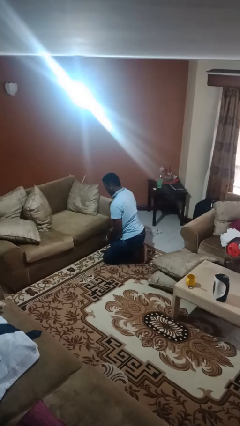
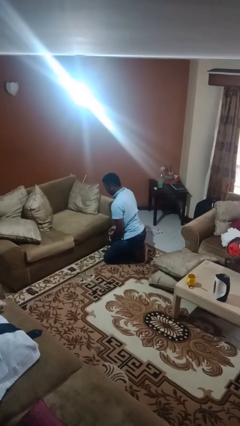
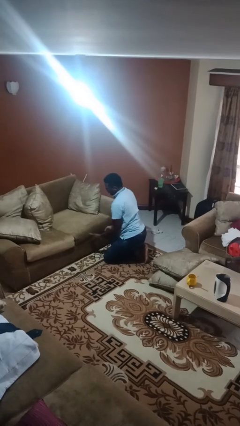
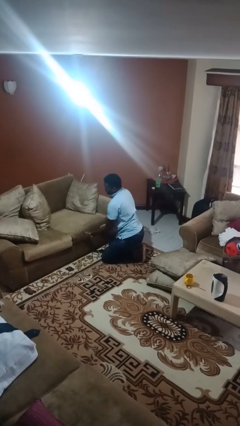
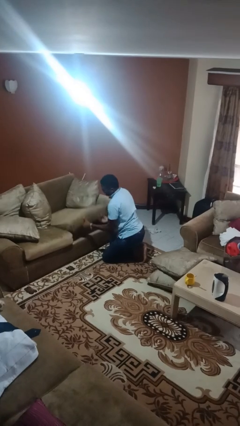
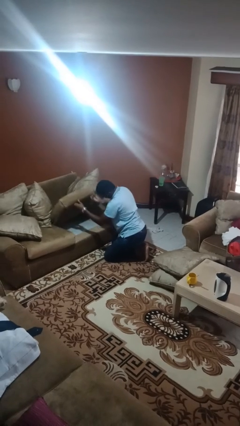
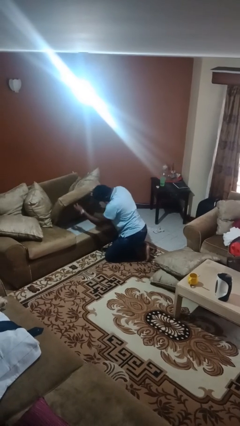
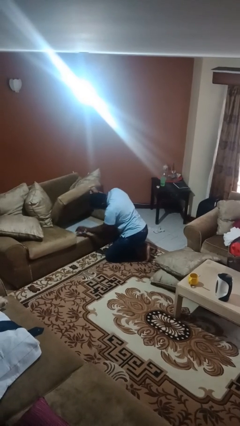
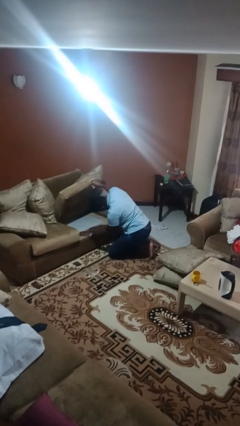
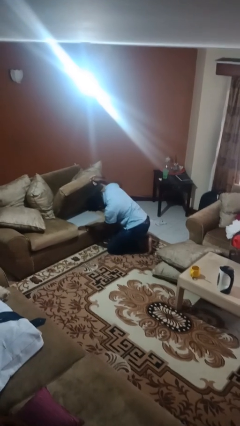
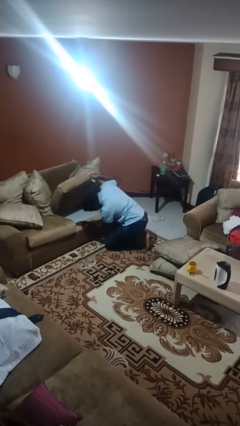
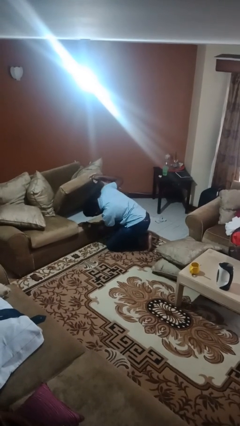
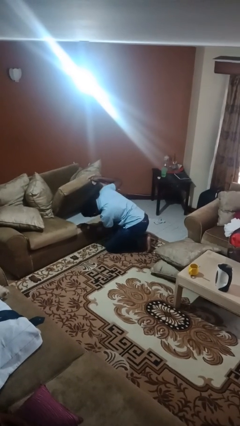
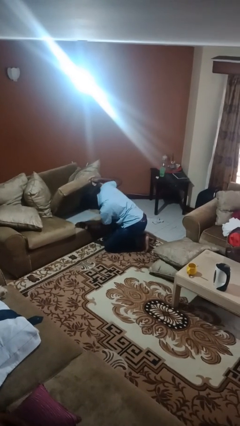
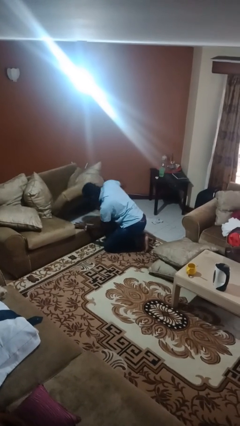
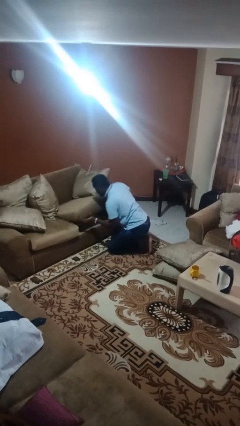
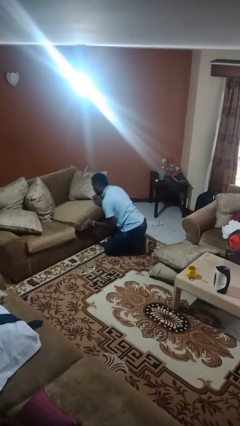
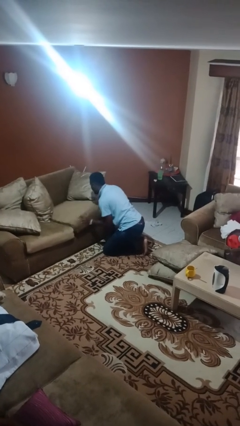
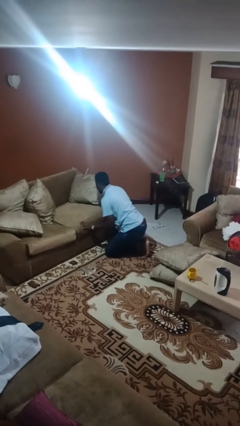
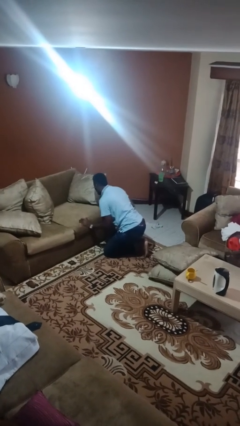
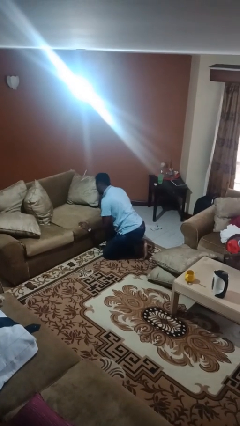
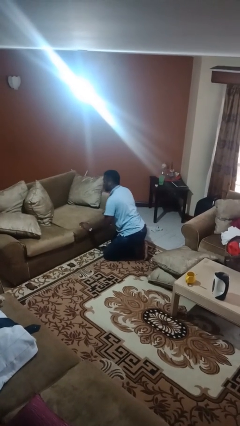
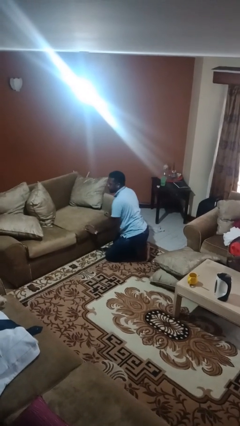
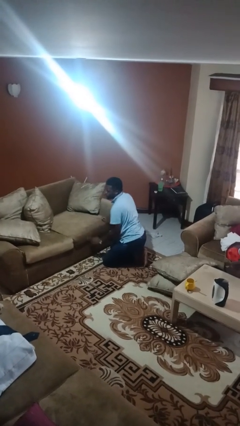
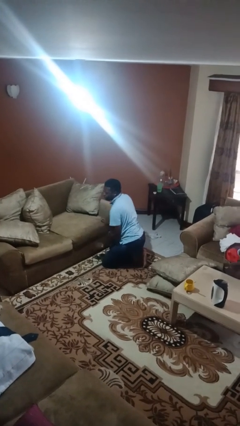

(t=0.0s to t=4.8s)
person searches under couch

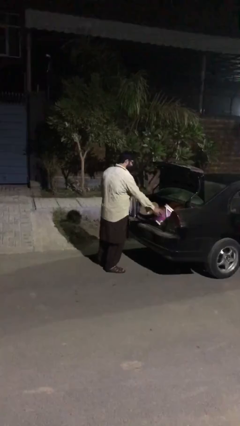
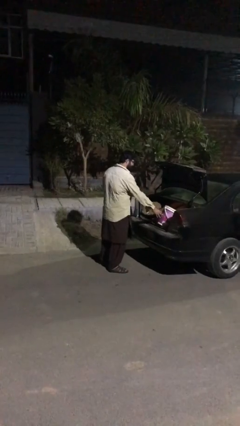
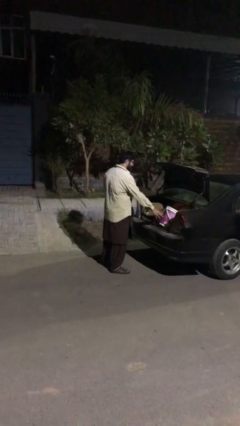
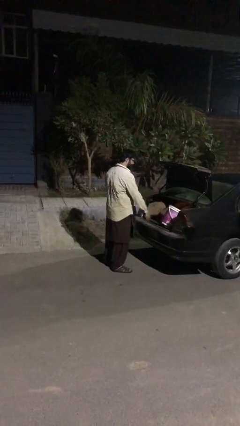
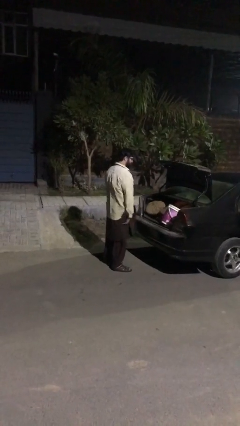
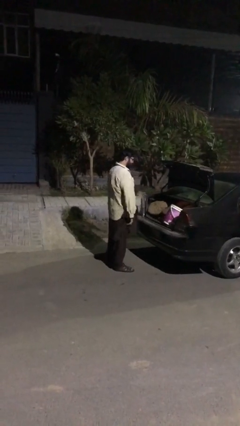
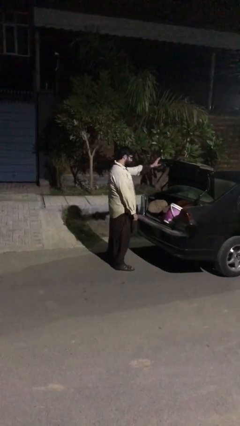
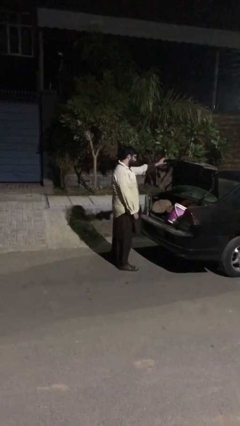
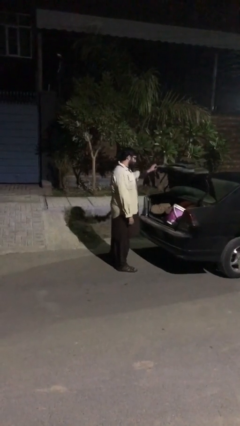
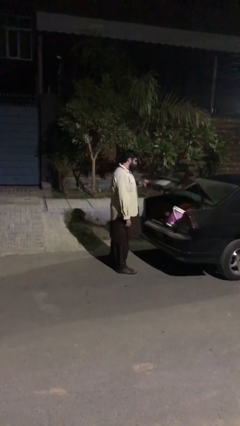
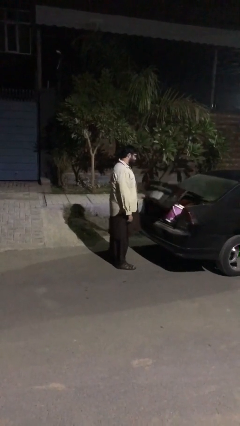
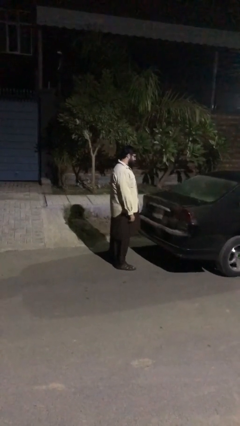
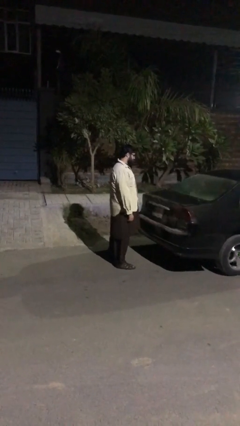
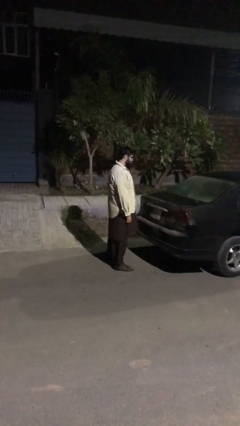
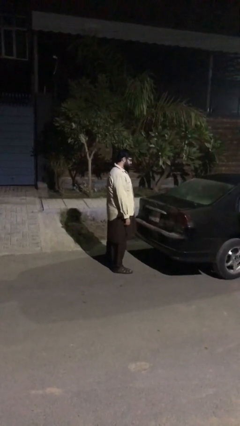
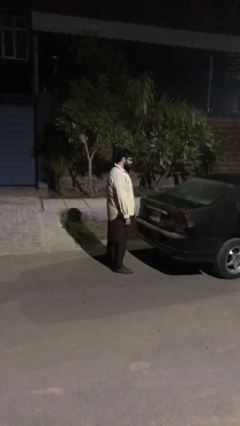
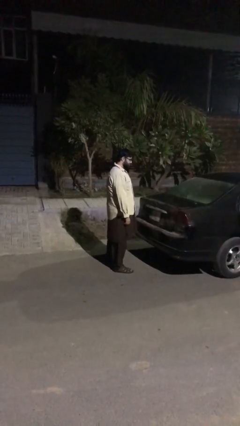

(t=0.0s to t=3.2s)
person closes car trunk

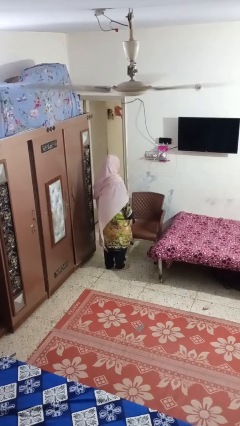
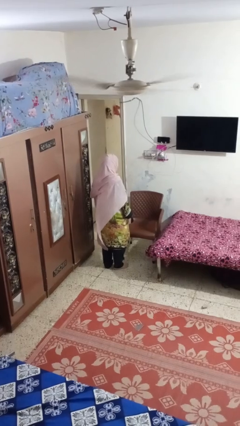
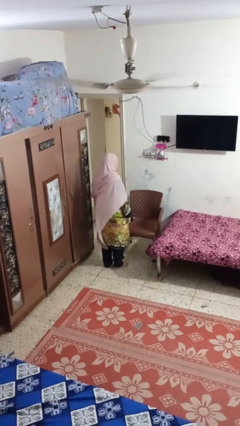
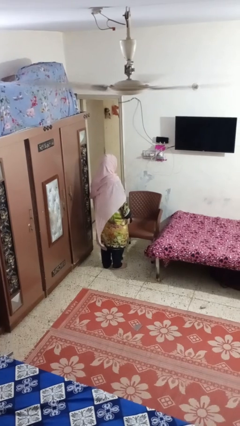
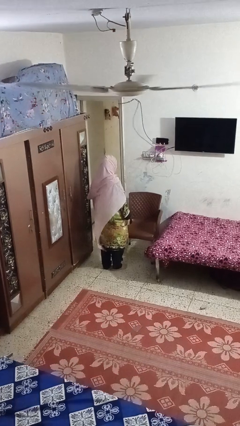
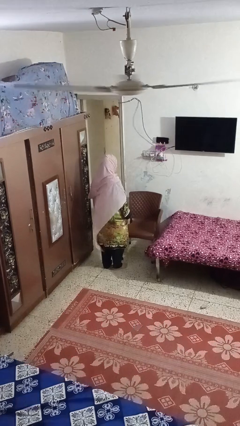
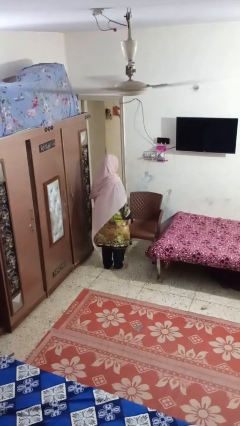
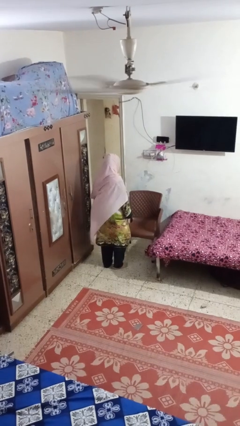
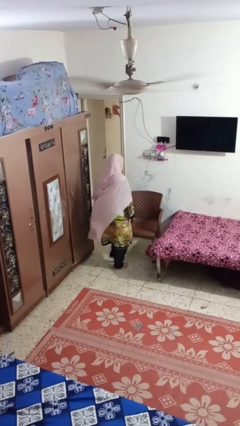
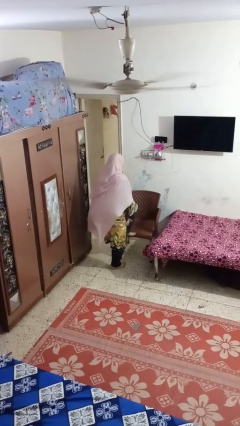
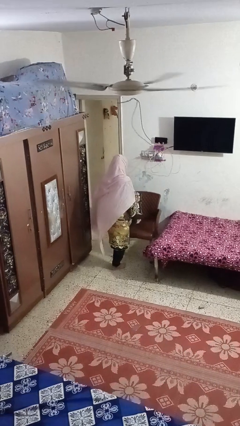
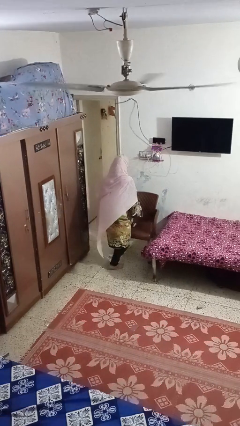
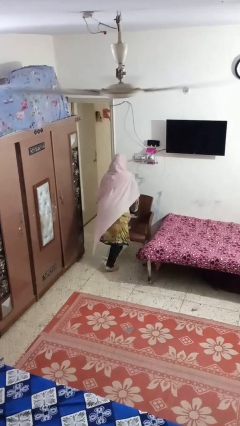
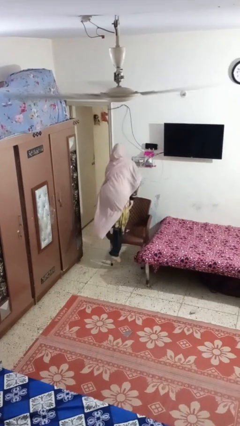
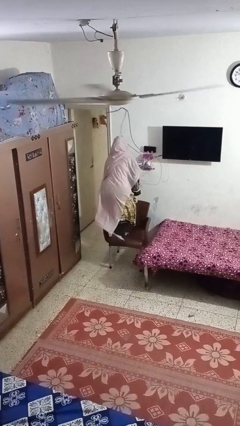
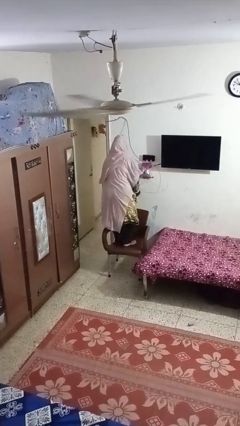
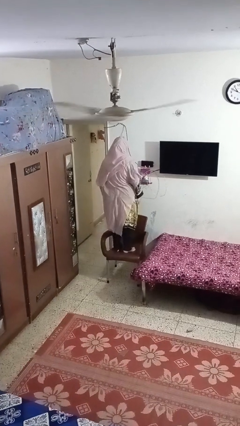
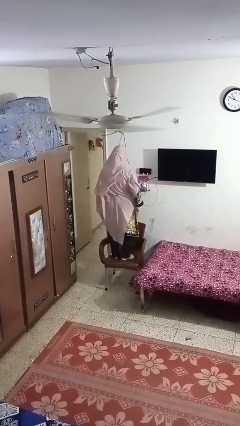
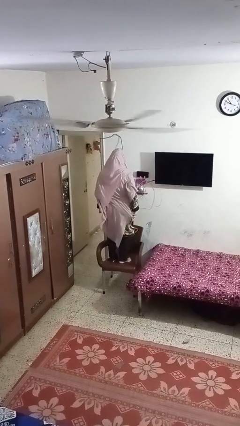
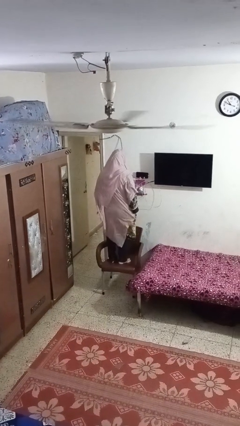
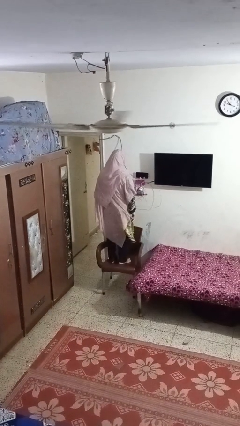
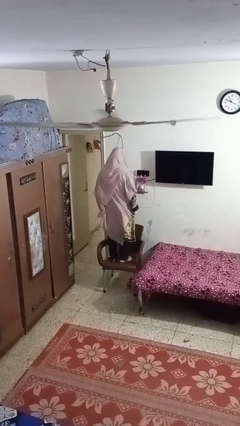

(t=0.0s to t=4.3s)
person climbs on chair

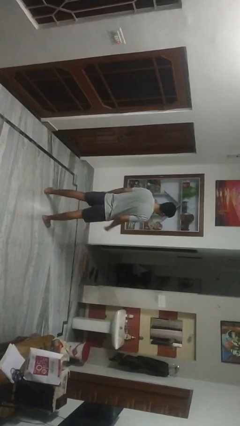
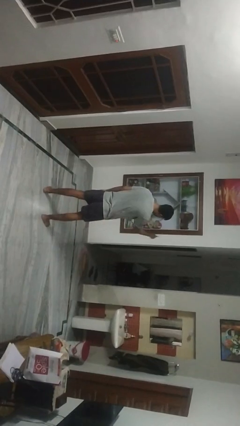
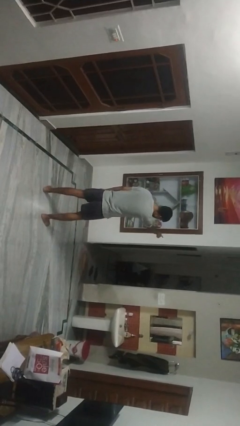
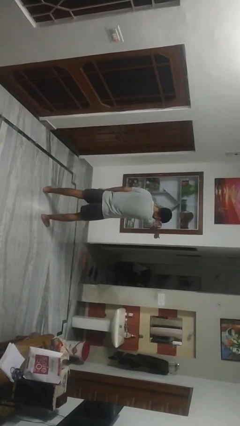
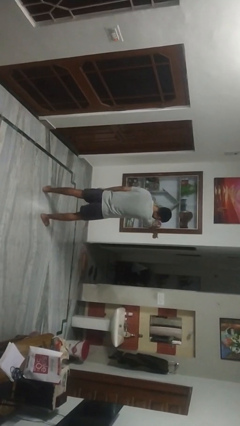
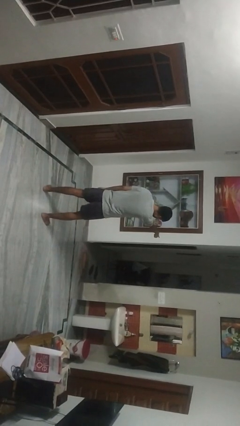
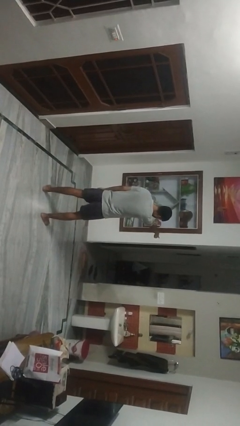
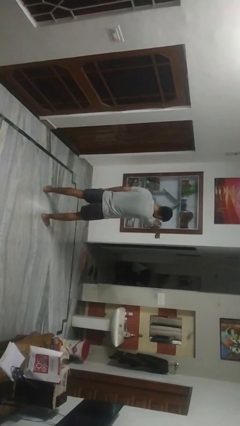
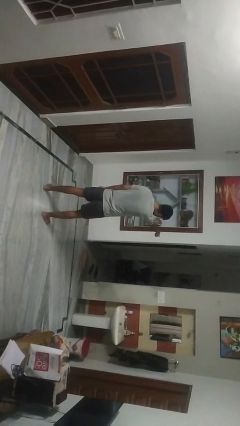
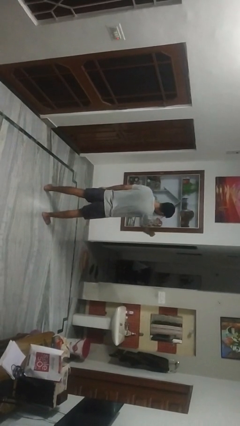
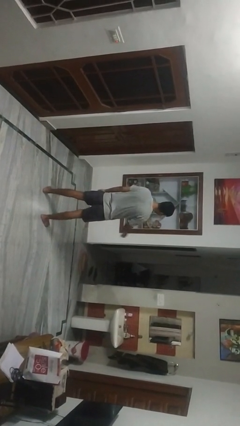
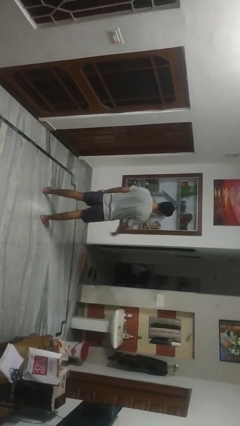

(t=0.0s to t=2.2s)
person points at person

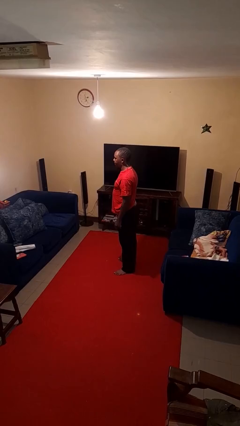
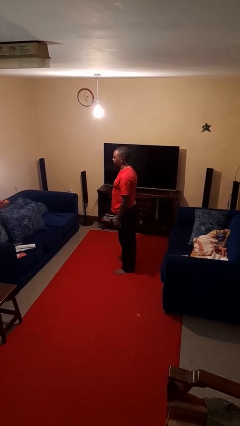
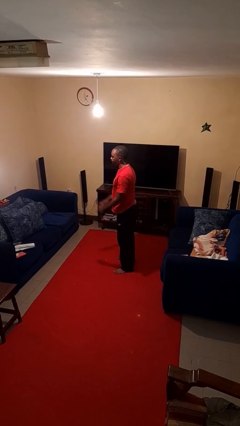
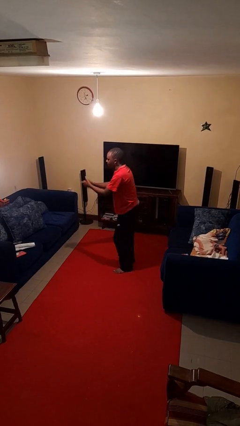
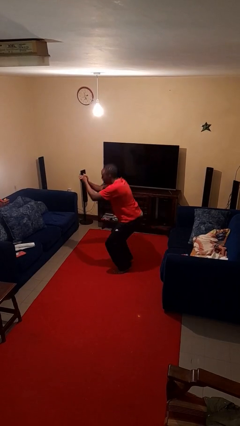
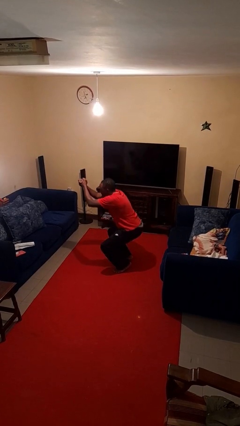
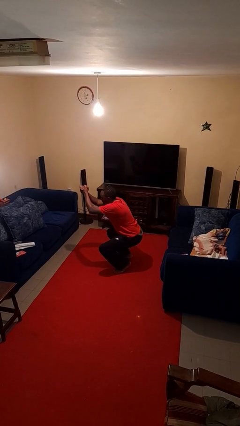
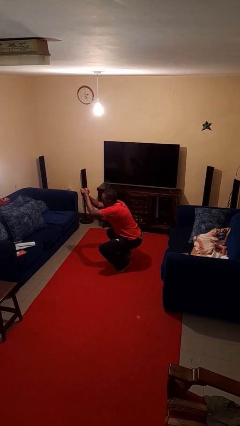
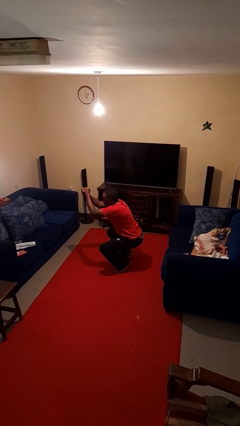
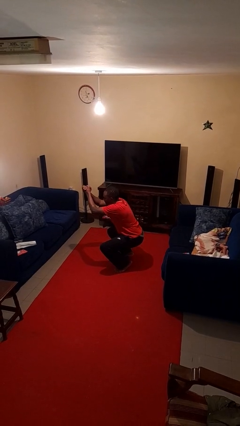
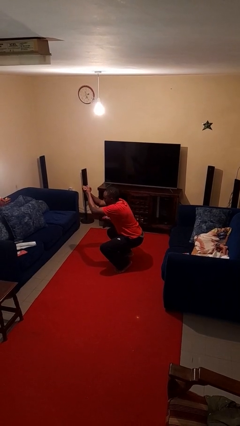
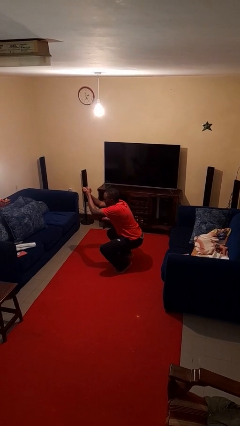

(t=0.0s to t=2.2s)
person squats

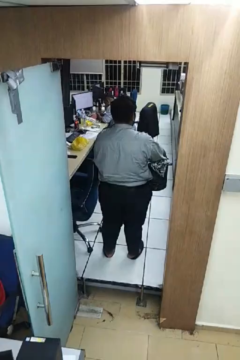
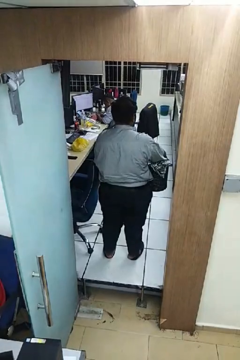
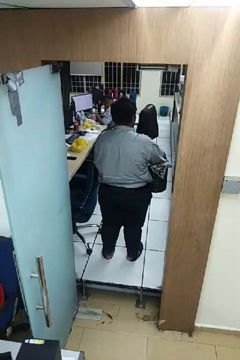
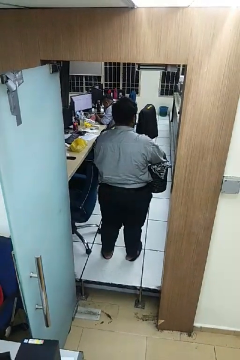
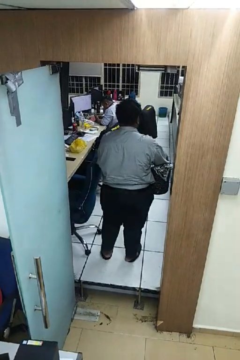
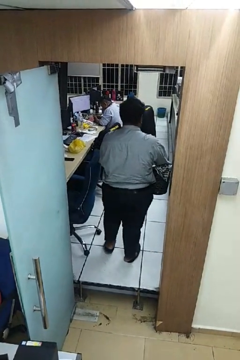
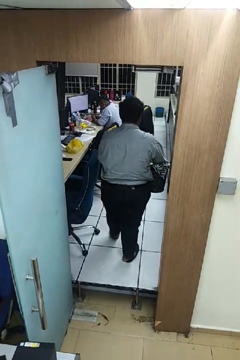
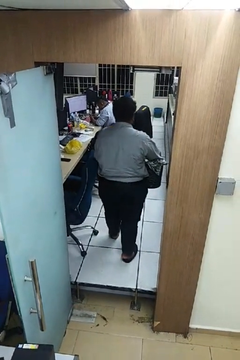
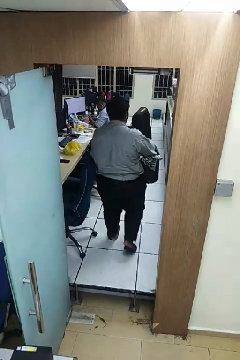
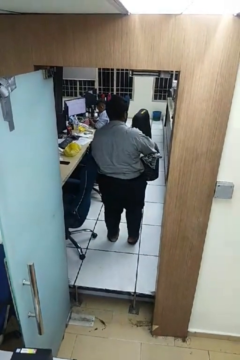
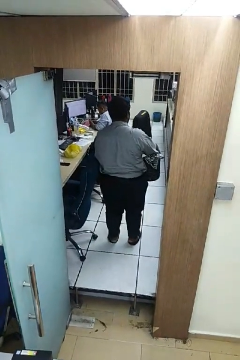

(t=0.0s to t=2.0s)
person carries laundry basket
